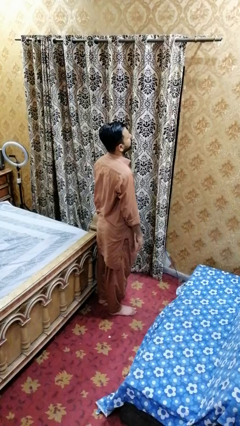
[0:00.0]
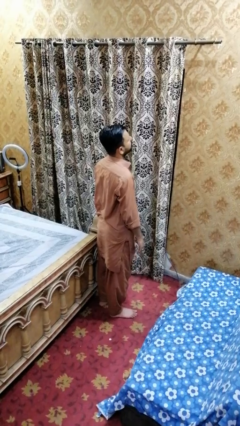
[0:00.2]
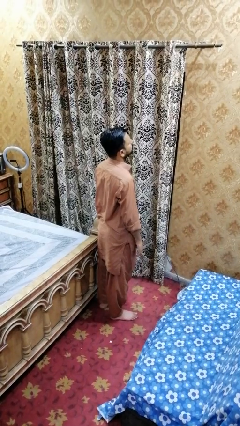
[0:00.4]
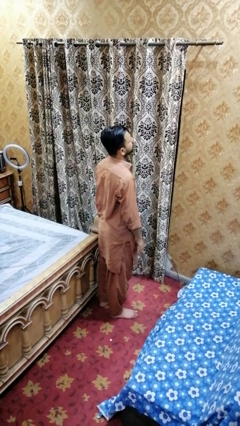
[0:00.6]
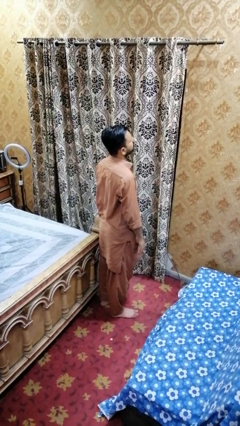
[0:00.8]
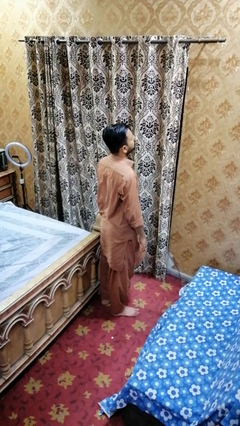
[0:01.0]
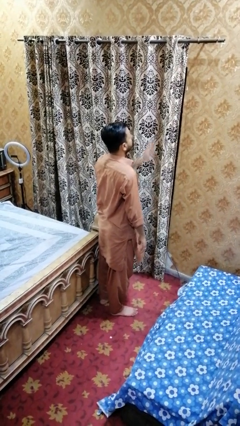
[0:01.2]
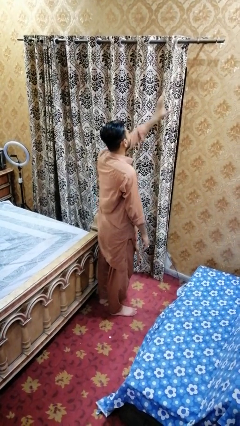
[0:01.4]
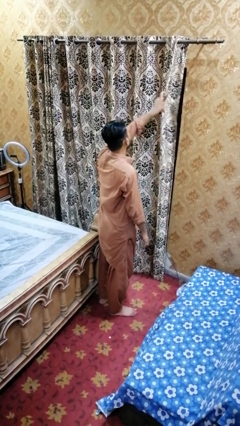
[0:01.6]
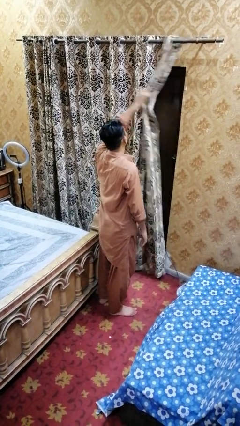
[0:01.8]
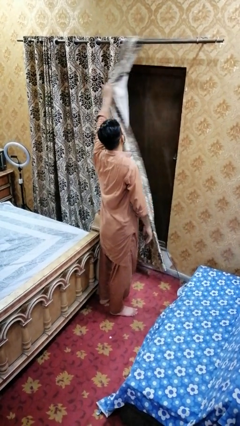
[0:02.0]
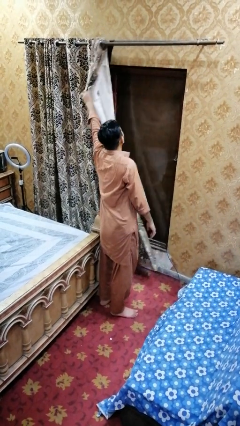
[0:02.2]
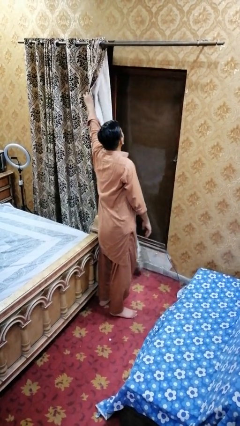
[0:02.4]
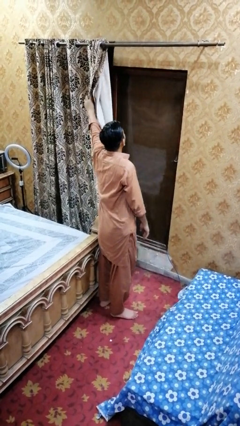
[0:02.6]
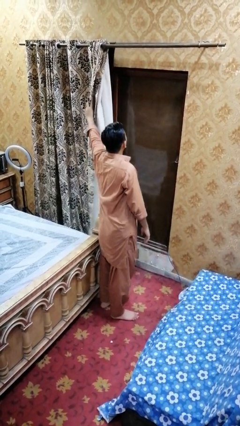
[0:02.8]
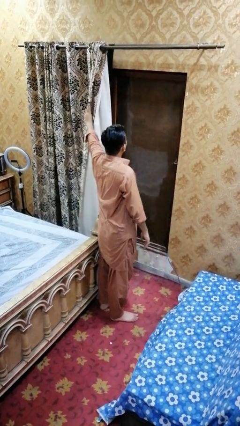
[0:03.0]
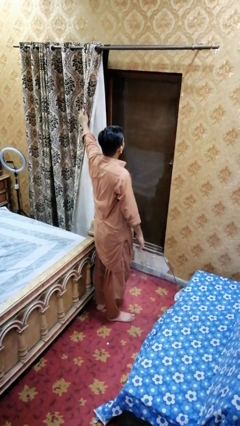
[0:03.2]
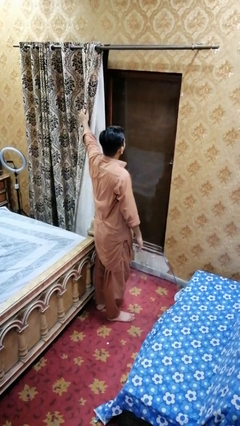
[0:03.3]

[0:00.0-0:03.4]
person opens curtains

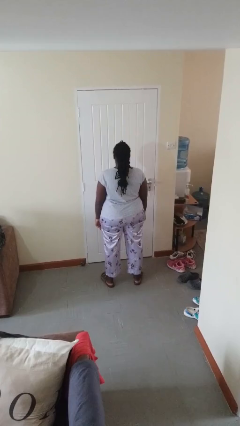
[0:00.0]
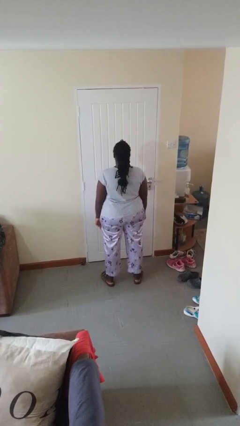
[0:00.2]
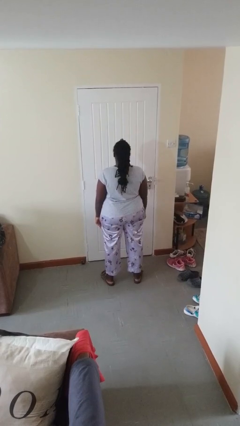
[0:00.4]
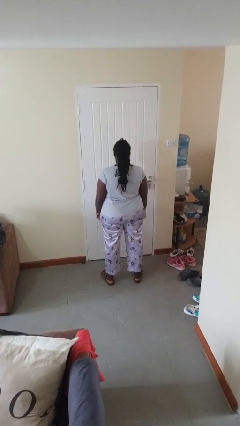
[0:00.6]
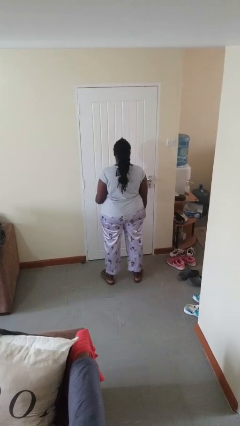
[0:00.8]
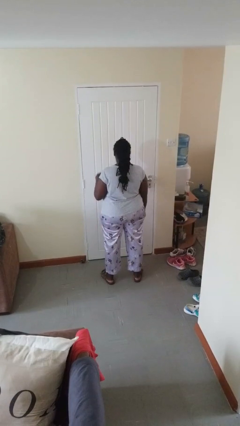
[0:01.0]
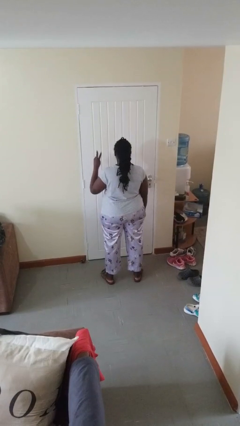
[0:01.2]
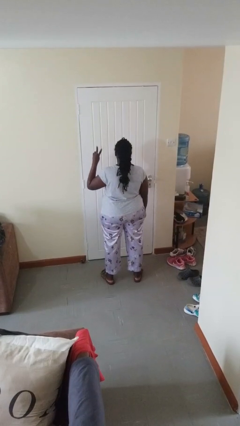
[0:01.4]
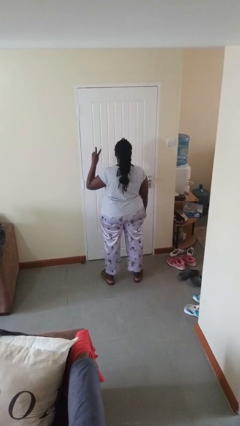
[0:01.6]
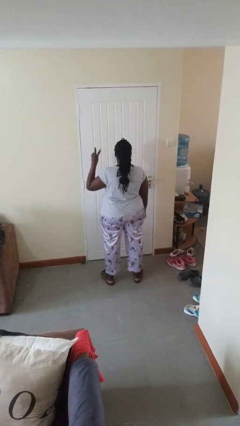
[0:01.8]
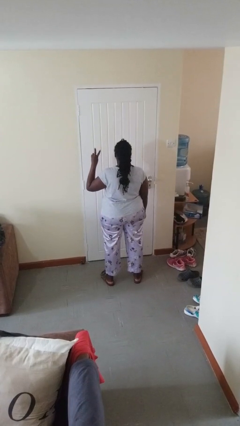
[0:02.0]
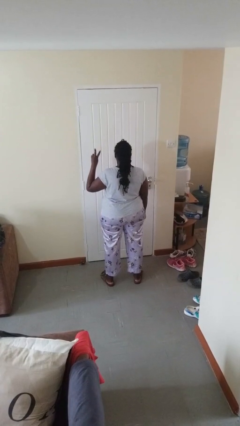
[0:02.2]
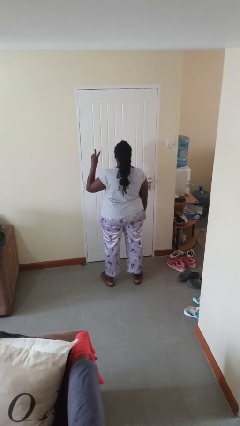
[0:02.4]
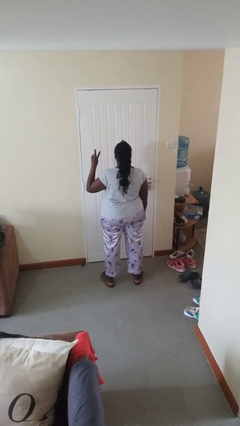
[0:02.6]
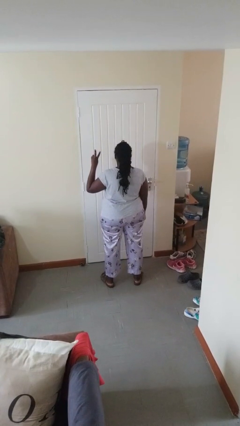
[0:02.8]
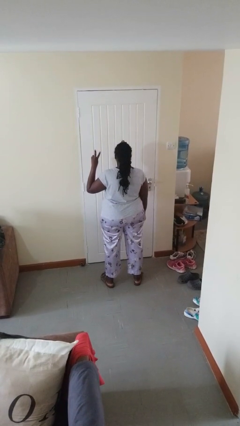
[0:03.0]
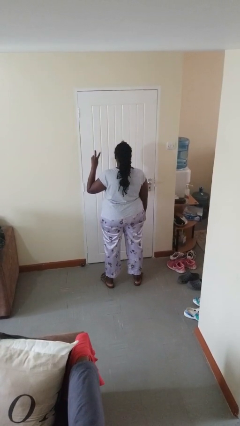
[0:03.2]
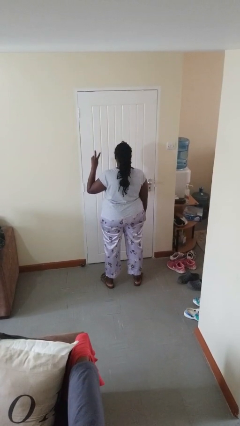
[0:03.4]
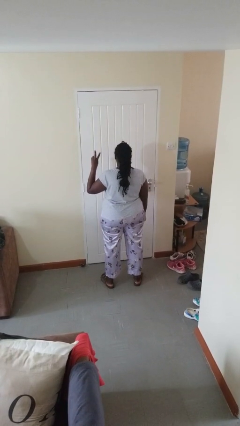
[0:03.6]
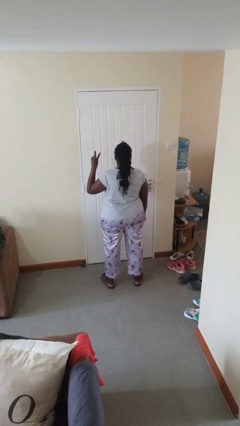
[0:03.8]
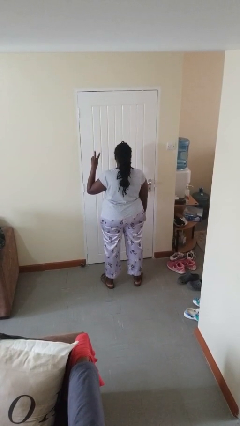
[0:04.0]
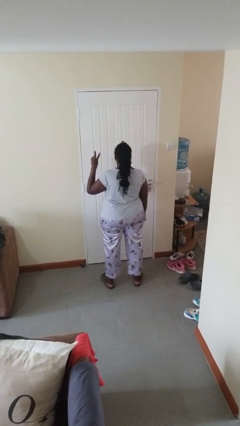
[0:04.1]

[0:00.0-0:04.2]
person gestures peace

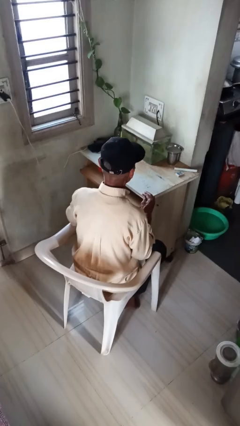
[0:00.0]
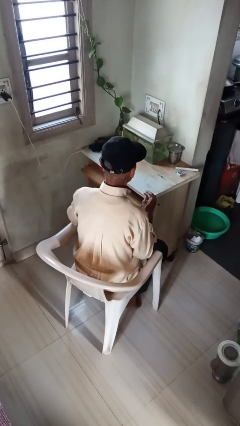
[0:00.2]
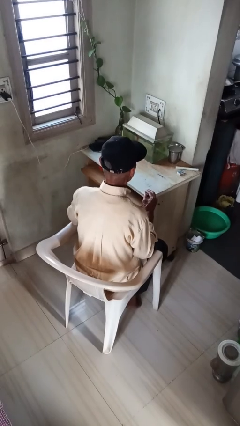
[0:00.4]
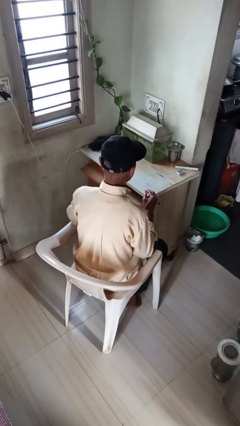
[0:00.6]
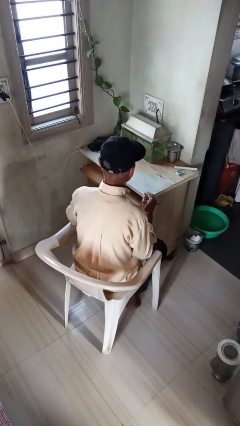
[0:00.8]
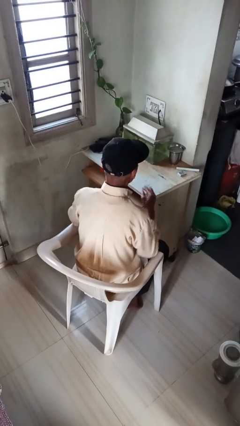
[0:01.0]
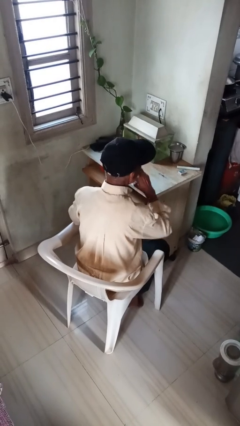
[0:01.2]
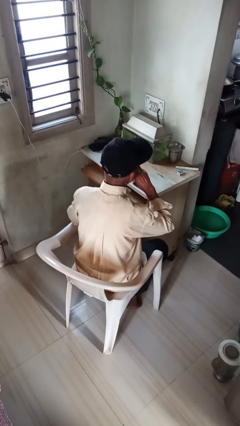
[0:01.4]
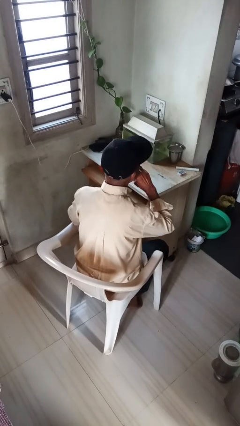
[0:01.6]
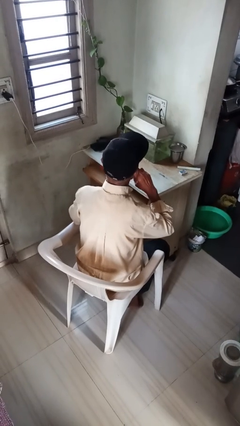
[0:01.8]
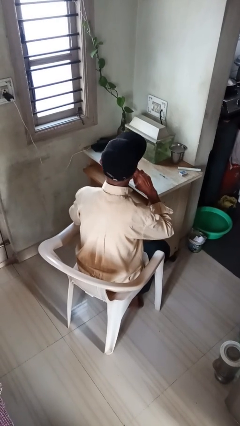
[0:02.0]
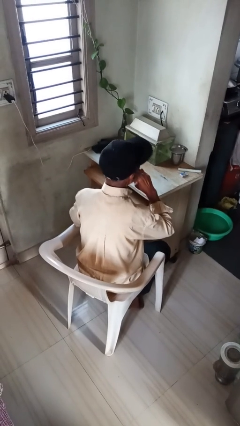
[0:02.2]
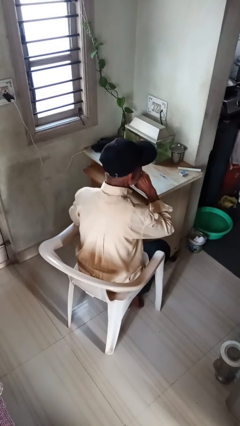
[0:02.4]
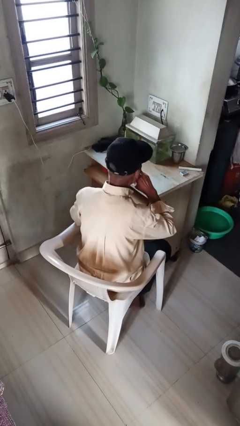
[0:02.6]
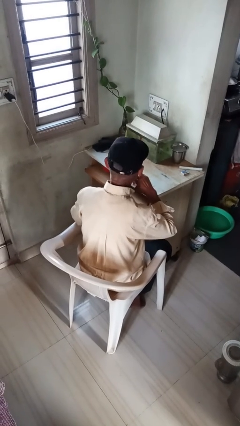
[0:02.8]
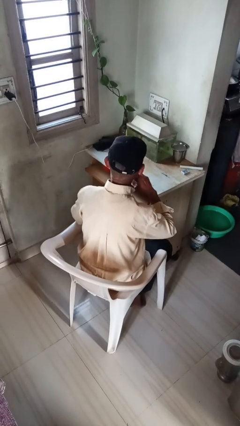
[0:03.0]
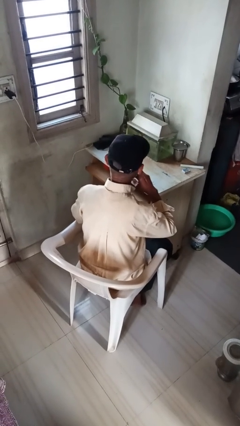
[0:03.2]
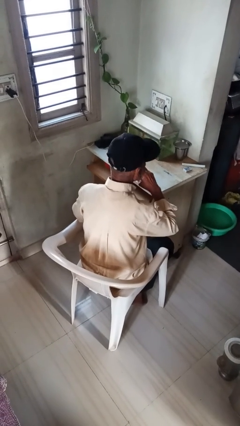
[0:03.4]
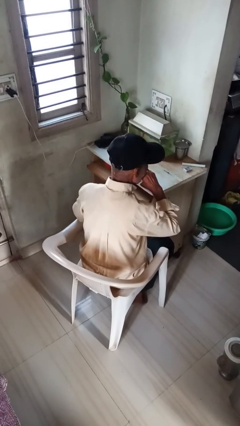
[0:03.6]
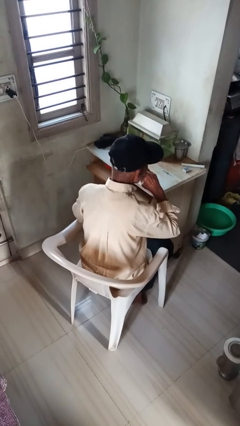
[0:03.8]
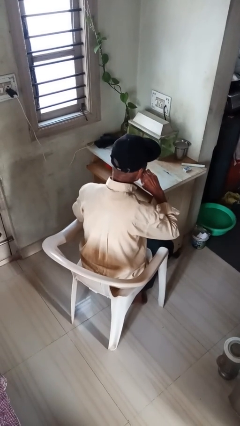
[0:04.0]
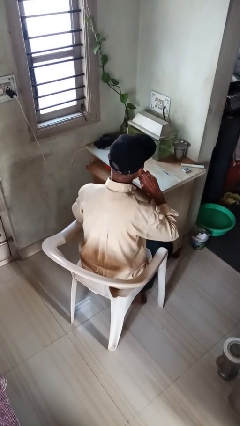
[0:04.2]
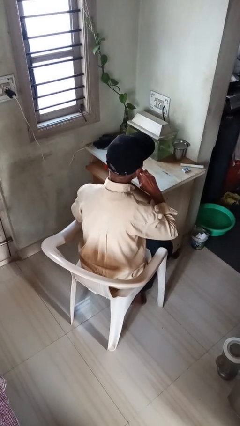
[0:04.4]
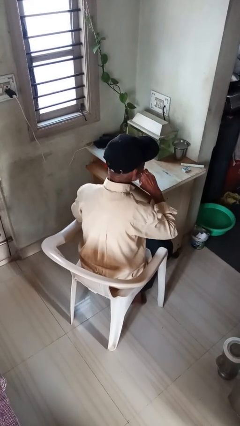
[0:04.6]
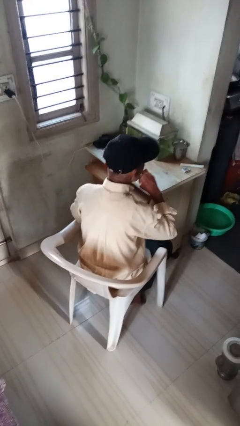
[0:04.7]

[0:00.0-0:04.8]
person licks fingers

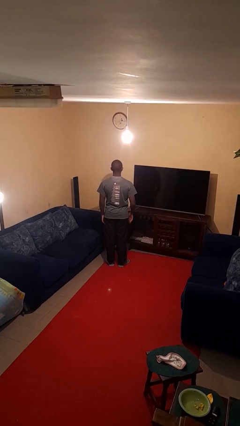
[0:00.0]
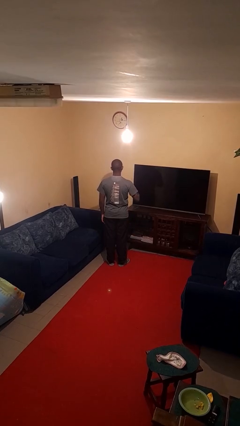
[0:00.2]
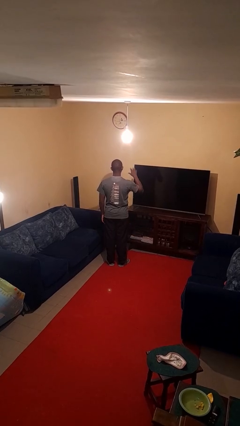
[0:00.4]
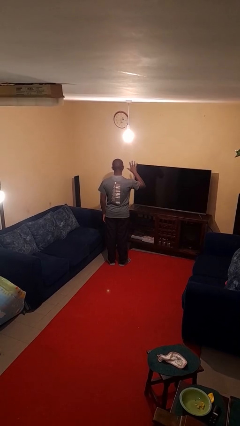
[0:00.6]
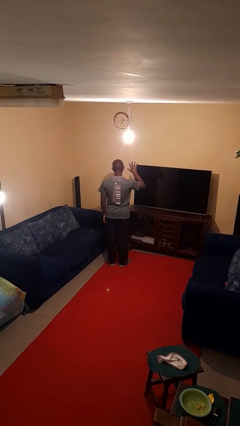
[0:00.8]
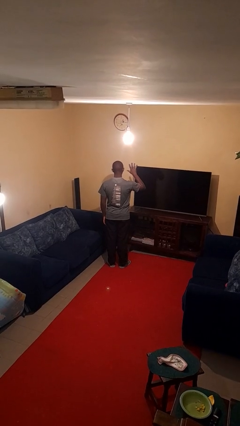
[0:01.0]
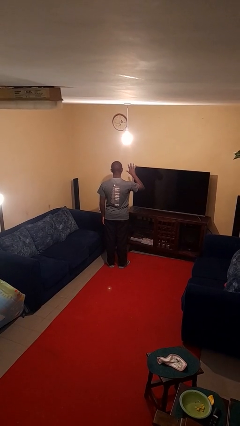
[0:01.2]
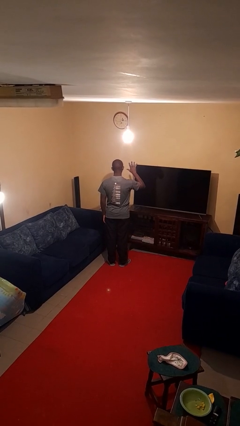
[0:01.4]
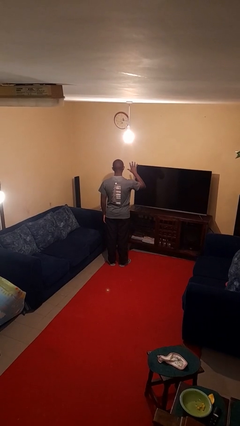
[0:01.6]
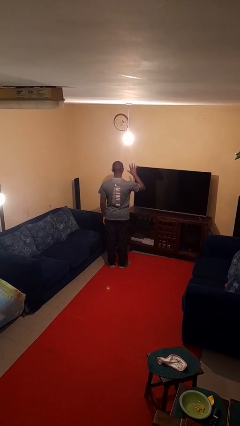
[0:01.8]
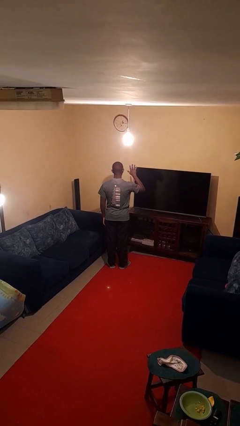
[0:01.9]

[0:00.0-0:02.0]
person gestures number five

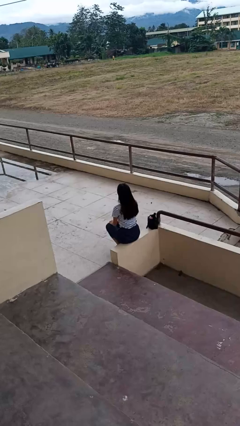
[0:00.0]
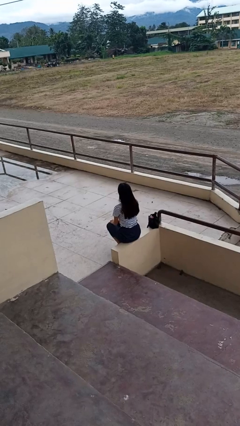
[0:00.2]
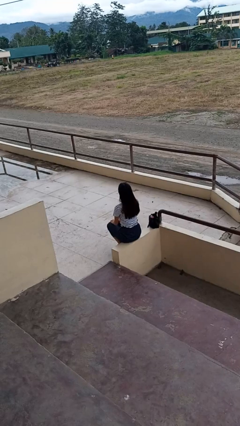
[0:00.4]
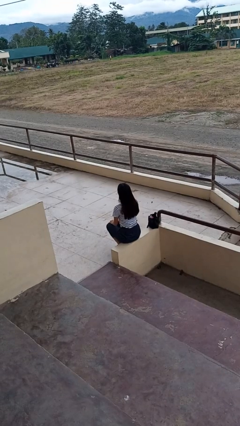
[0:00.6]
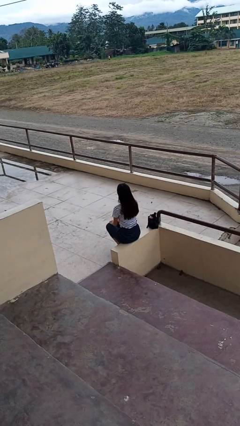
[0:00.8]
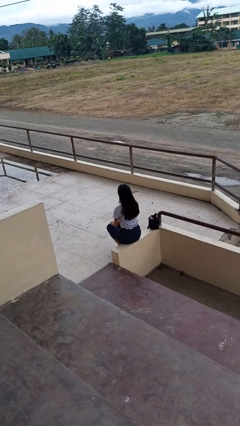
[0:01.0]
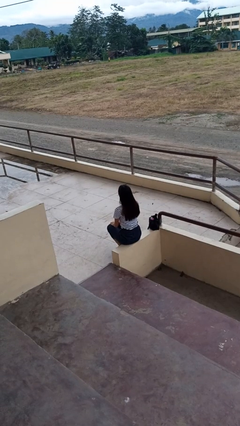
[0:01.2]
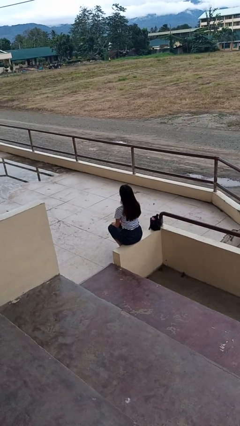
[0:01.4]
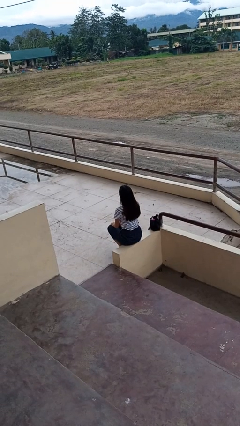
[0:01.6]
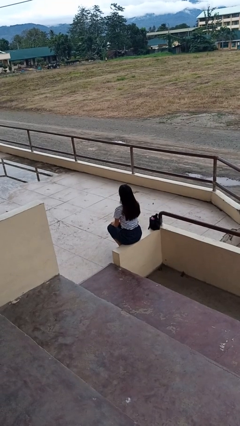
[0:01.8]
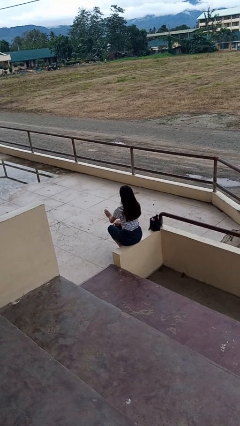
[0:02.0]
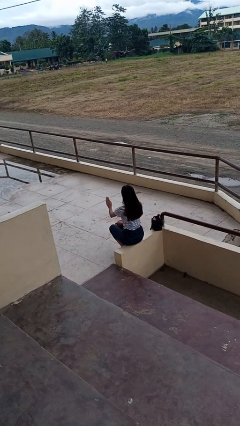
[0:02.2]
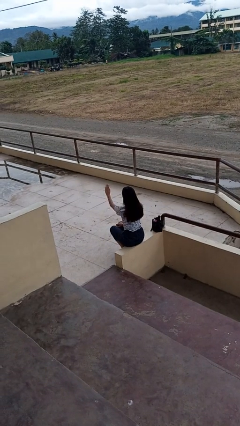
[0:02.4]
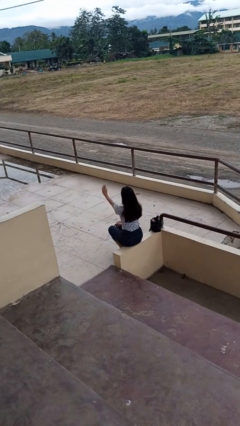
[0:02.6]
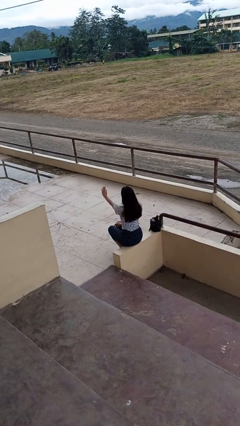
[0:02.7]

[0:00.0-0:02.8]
person gestures stop
